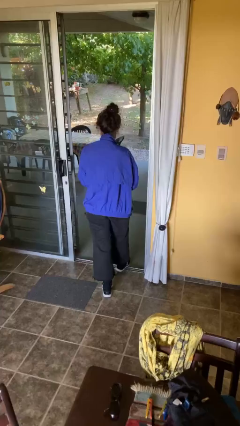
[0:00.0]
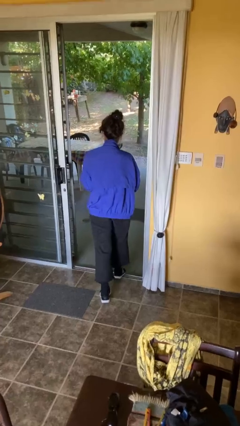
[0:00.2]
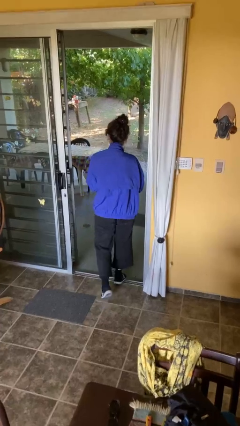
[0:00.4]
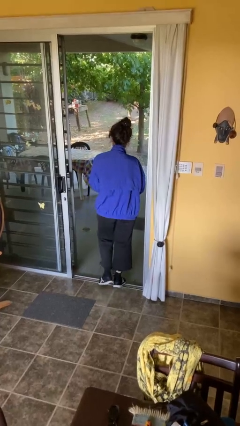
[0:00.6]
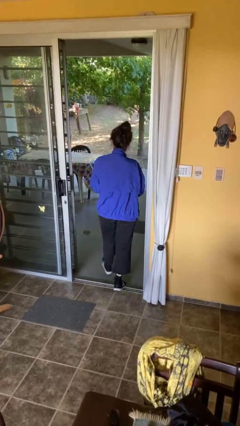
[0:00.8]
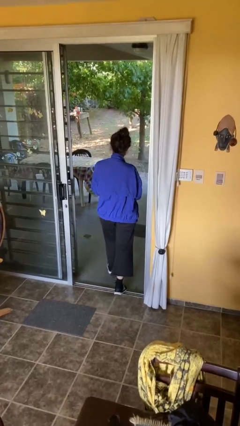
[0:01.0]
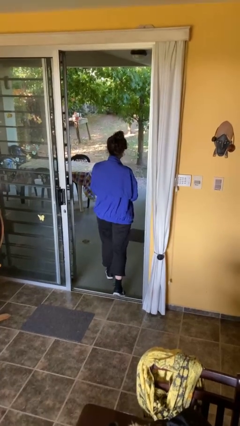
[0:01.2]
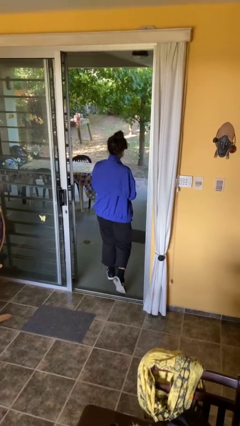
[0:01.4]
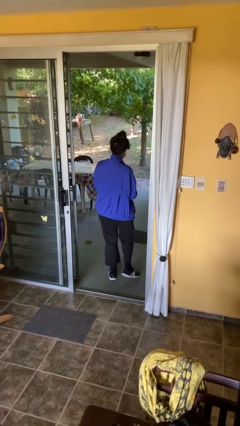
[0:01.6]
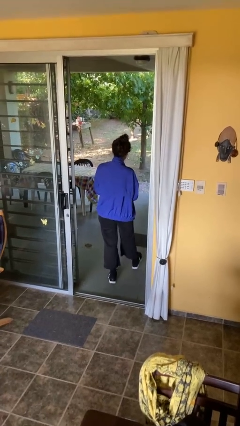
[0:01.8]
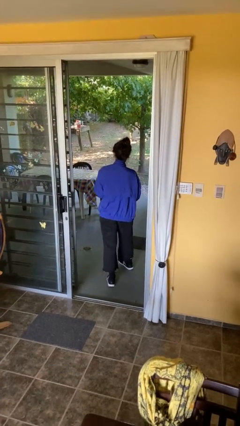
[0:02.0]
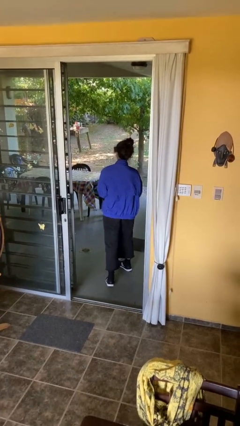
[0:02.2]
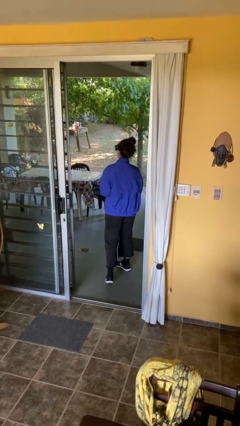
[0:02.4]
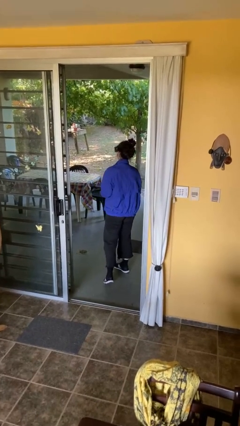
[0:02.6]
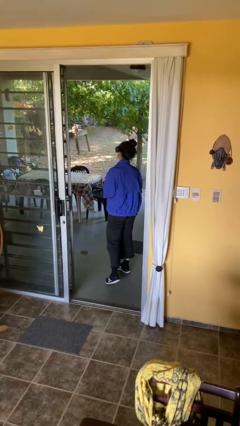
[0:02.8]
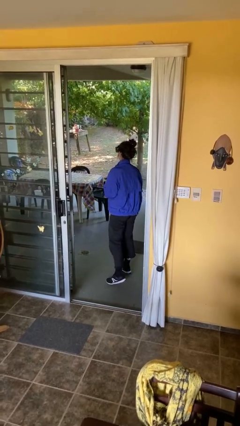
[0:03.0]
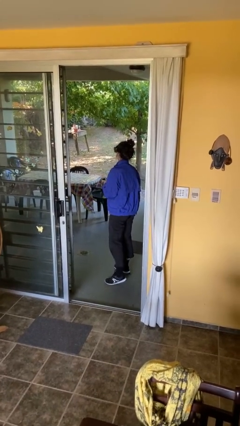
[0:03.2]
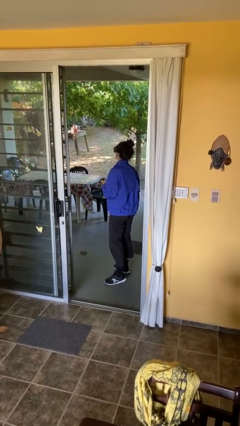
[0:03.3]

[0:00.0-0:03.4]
person exits scene through structure

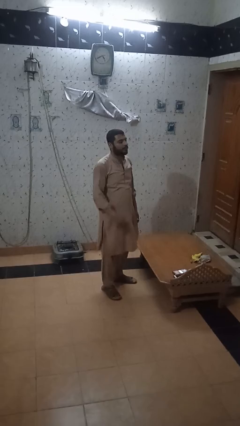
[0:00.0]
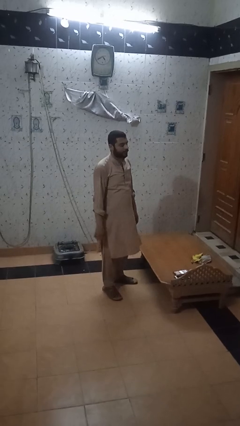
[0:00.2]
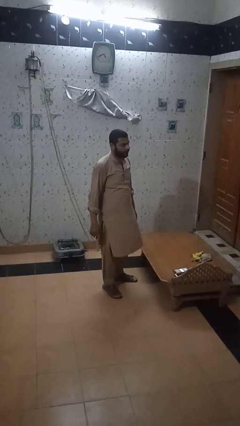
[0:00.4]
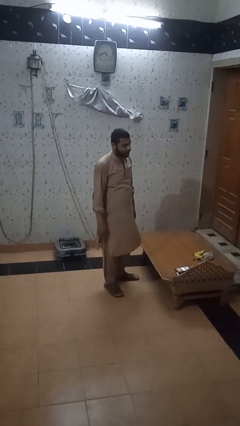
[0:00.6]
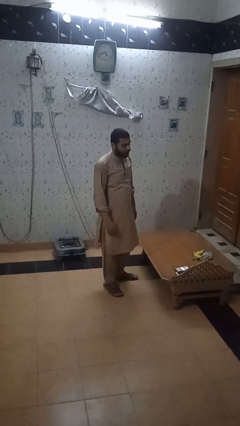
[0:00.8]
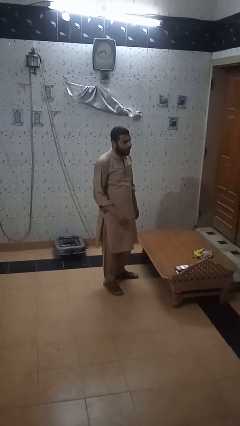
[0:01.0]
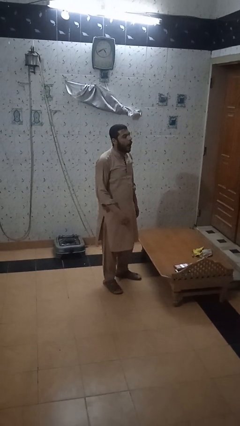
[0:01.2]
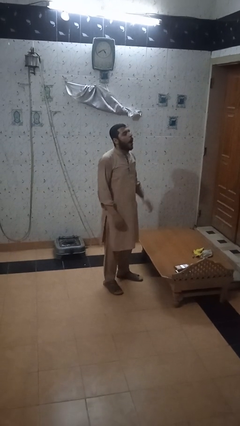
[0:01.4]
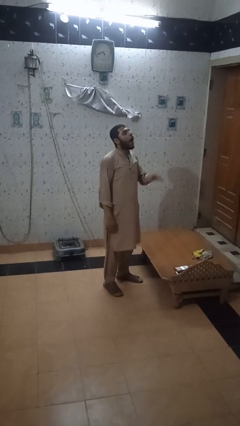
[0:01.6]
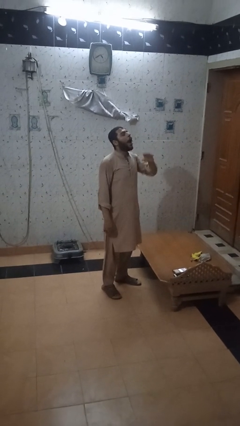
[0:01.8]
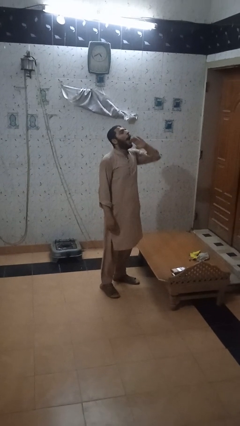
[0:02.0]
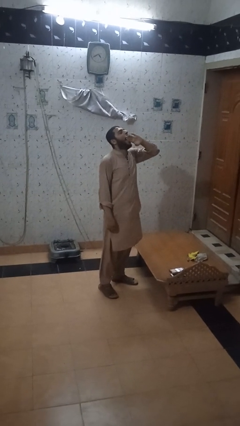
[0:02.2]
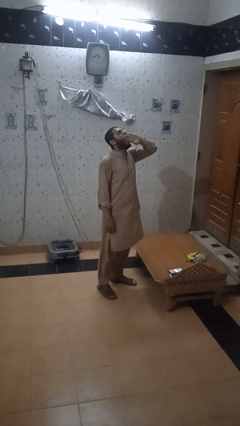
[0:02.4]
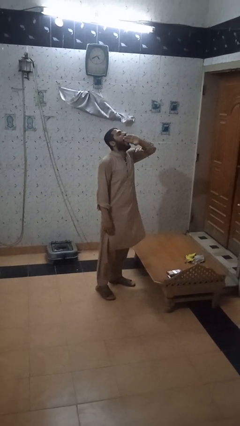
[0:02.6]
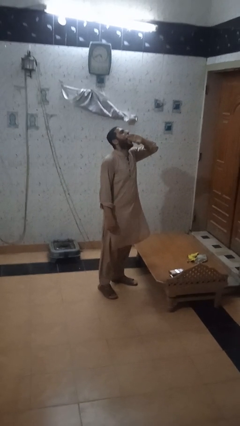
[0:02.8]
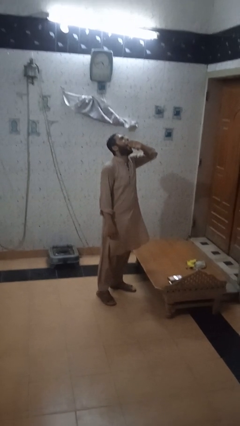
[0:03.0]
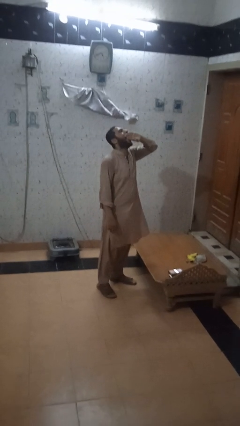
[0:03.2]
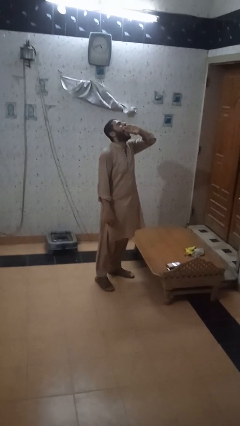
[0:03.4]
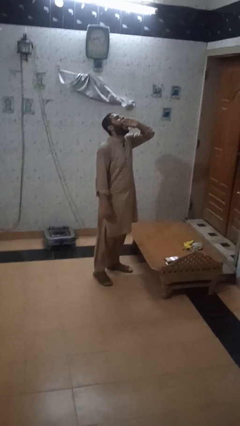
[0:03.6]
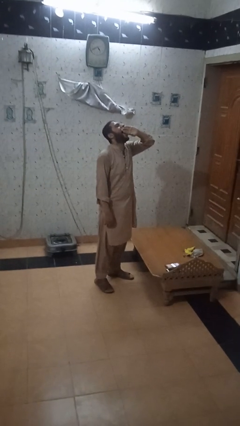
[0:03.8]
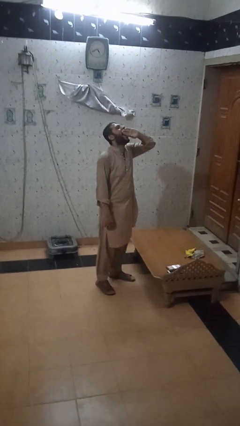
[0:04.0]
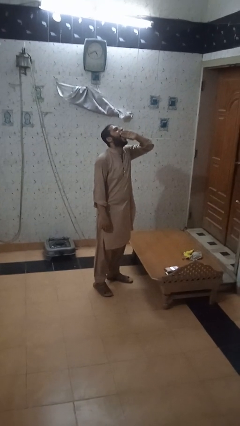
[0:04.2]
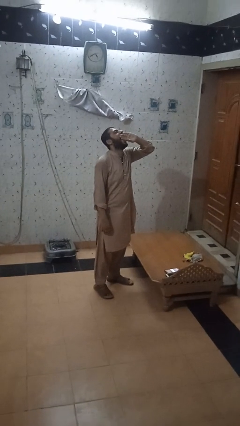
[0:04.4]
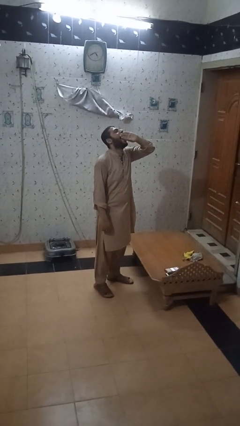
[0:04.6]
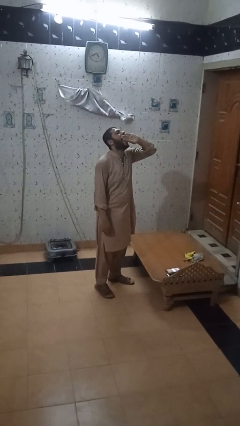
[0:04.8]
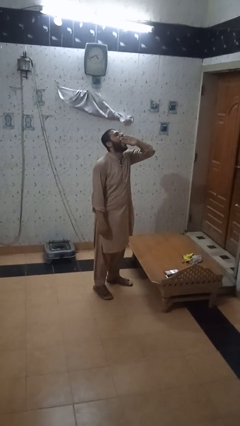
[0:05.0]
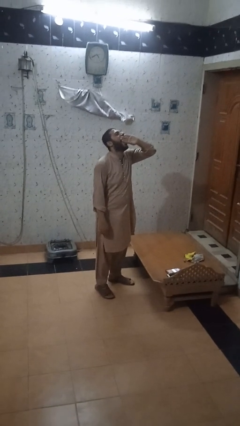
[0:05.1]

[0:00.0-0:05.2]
person yawns

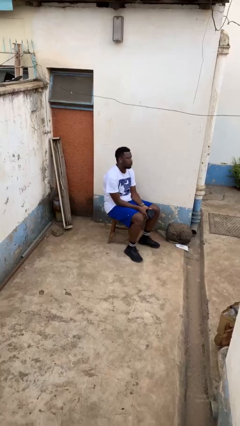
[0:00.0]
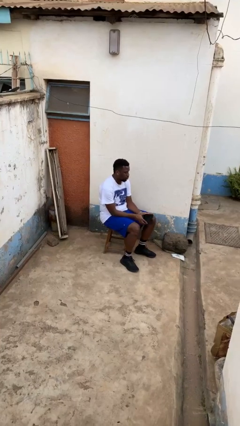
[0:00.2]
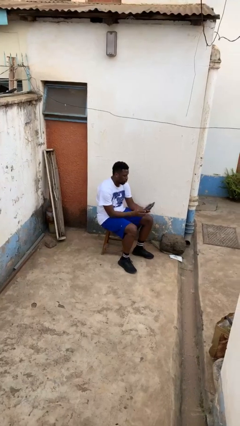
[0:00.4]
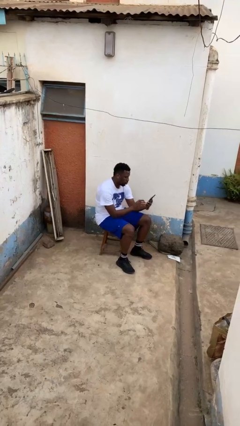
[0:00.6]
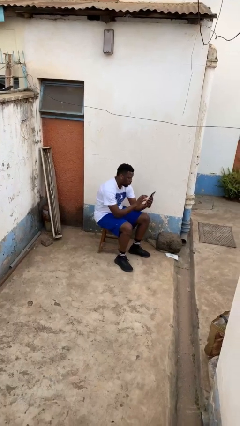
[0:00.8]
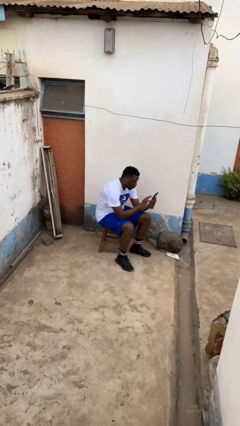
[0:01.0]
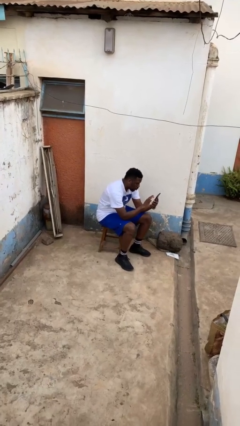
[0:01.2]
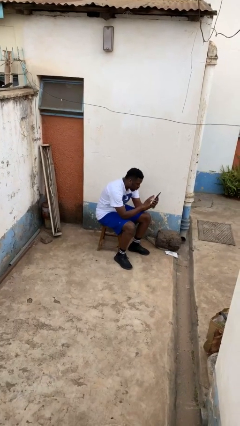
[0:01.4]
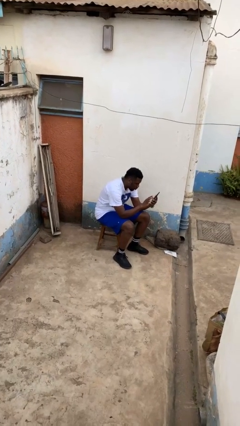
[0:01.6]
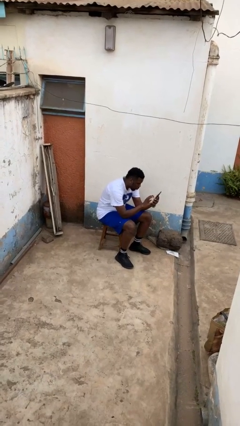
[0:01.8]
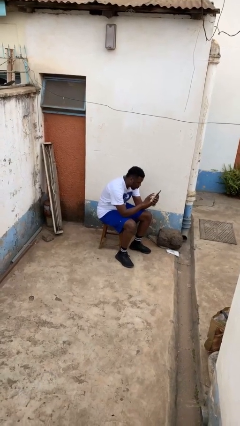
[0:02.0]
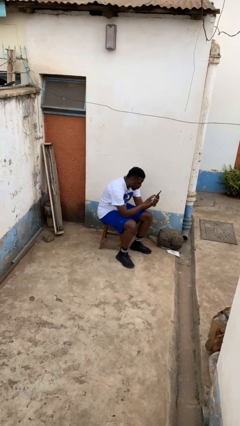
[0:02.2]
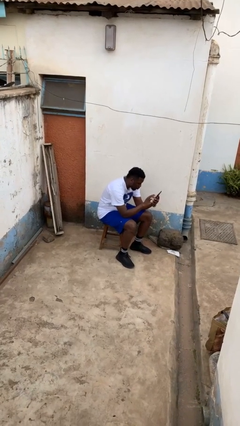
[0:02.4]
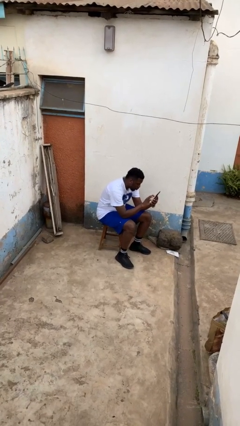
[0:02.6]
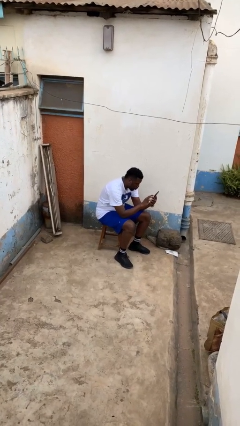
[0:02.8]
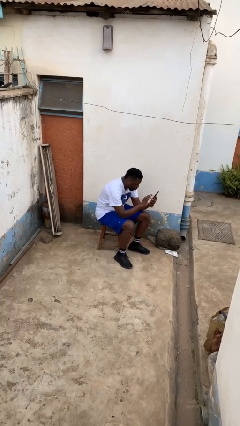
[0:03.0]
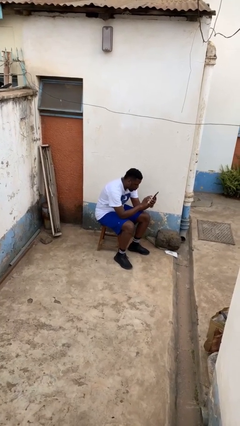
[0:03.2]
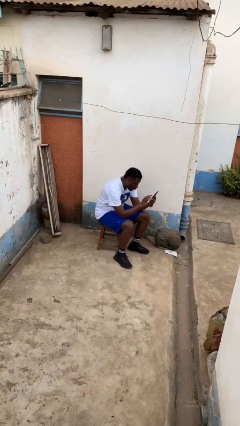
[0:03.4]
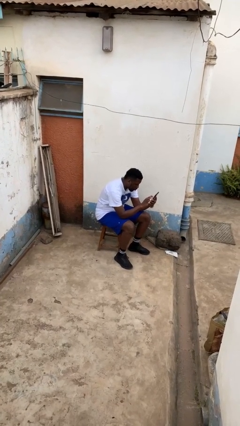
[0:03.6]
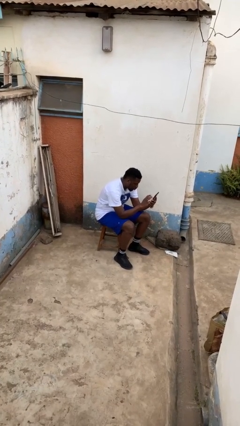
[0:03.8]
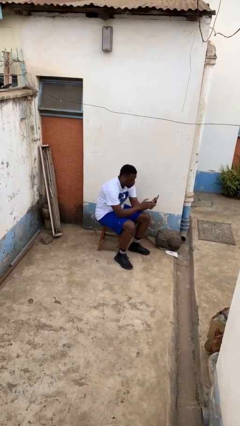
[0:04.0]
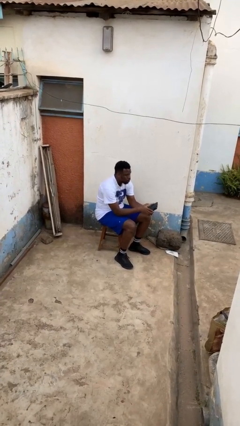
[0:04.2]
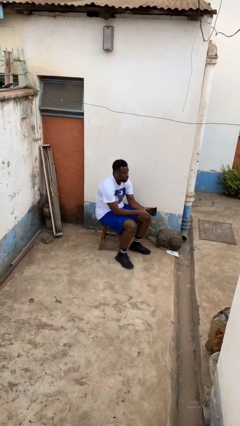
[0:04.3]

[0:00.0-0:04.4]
person interacts with tablet

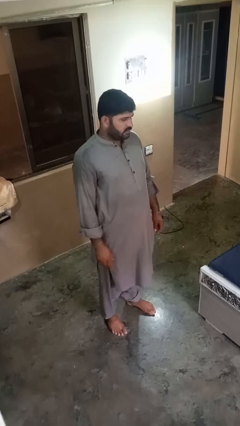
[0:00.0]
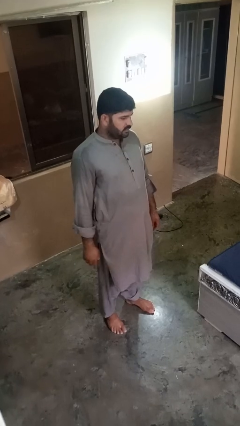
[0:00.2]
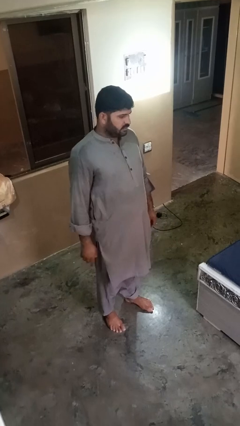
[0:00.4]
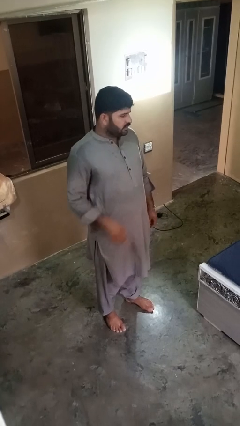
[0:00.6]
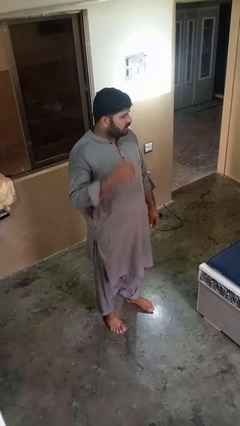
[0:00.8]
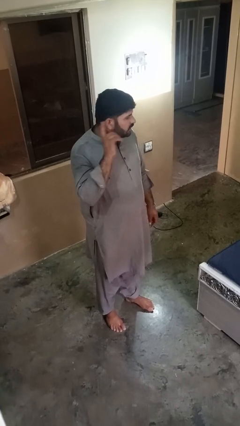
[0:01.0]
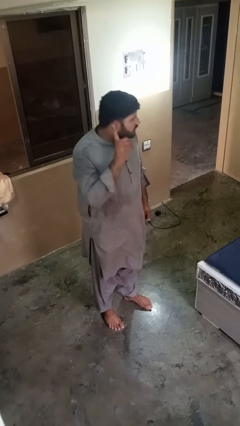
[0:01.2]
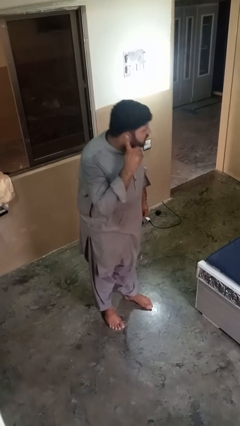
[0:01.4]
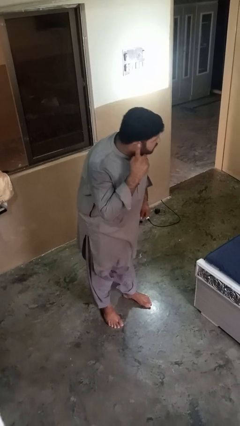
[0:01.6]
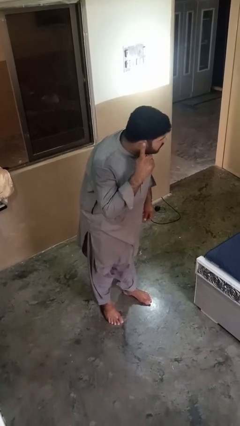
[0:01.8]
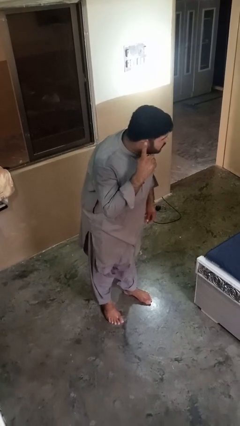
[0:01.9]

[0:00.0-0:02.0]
person gestures listen closely

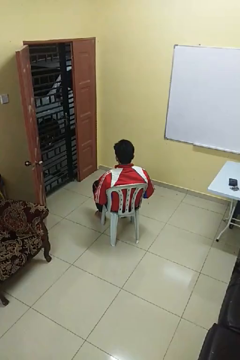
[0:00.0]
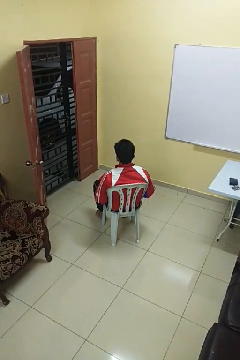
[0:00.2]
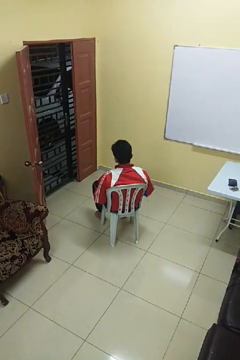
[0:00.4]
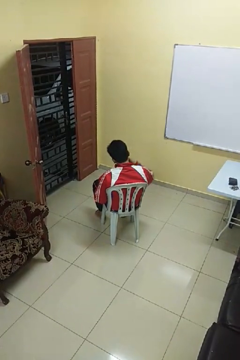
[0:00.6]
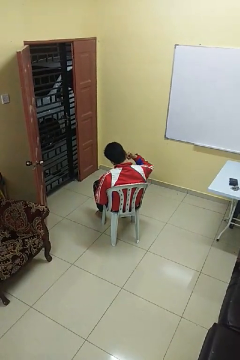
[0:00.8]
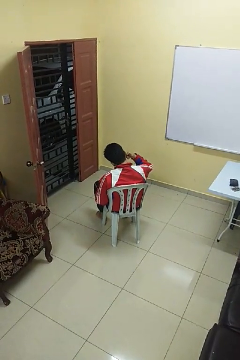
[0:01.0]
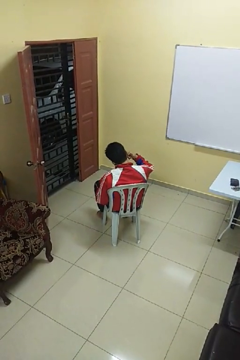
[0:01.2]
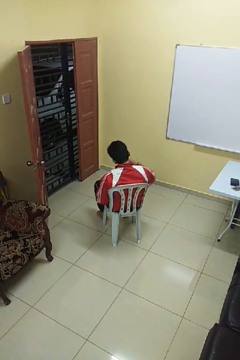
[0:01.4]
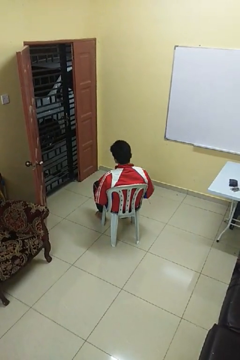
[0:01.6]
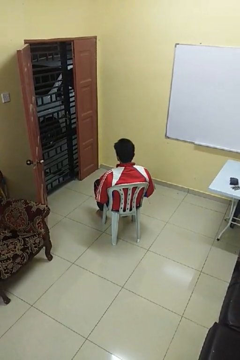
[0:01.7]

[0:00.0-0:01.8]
person gestures call me

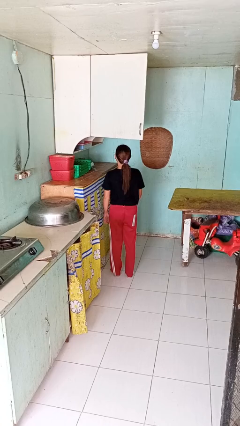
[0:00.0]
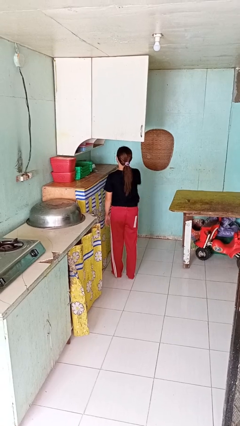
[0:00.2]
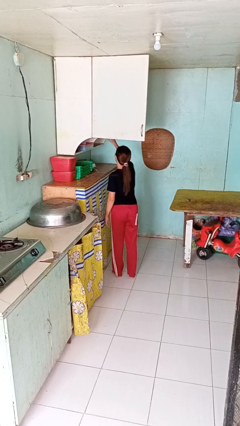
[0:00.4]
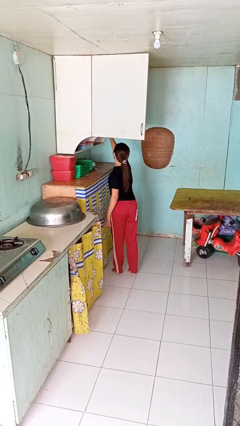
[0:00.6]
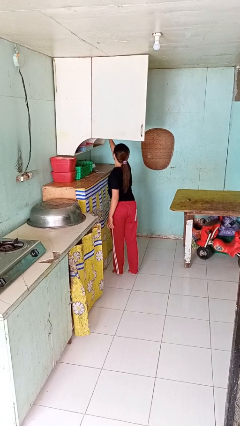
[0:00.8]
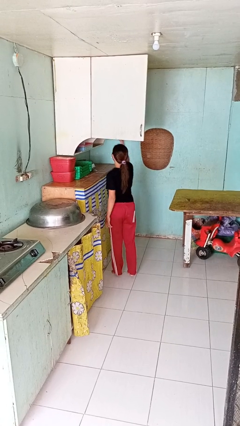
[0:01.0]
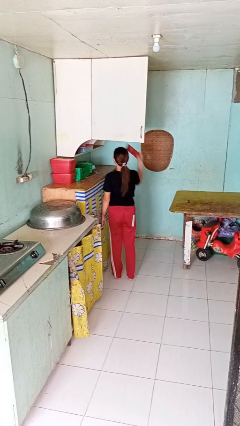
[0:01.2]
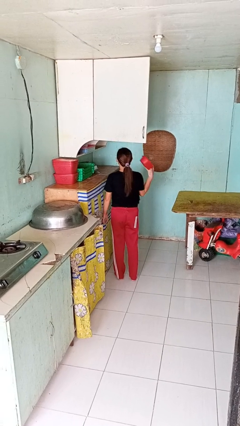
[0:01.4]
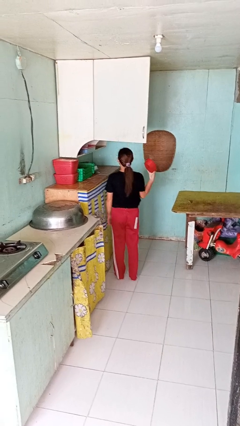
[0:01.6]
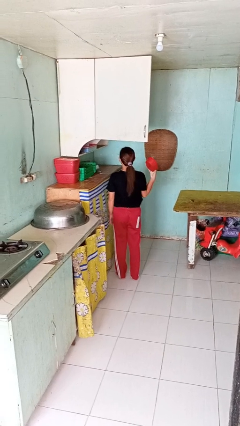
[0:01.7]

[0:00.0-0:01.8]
person takes object from cabinet
